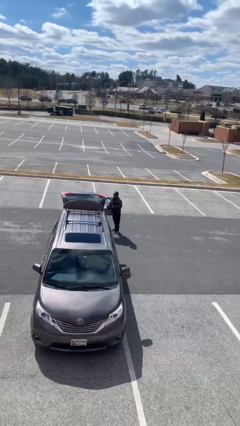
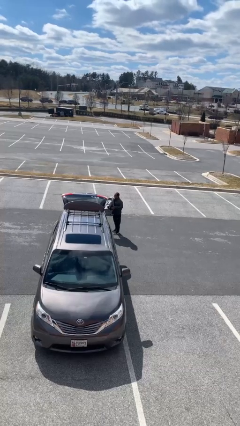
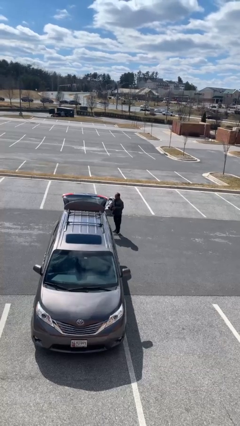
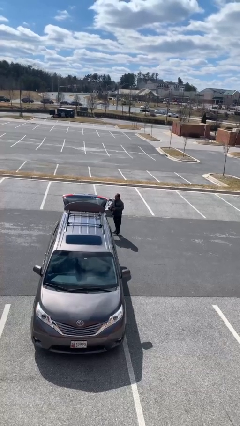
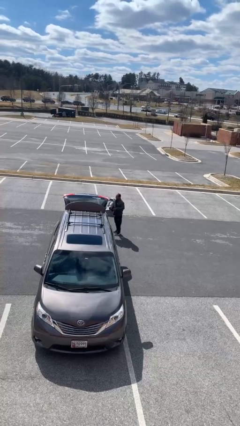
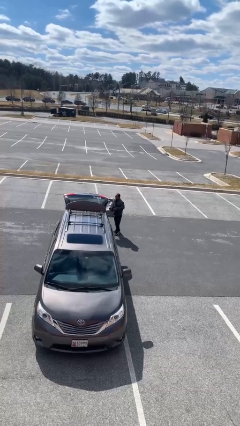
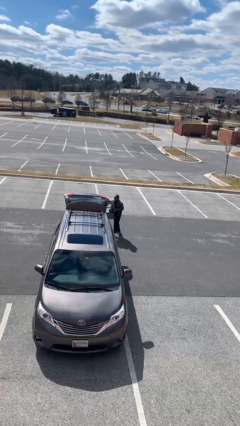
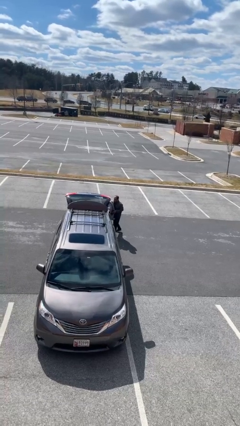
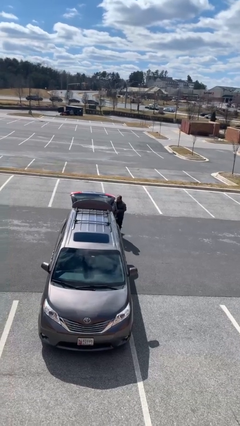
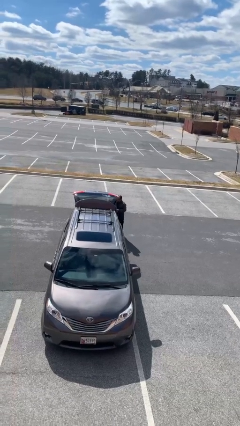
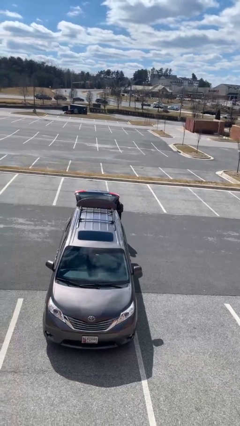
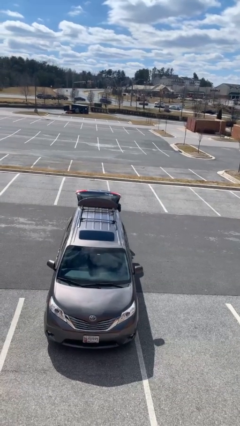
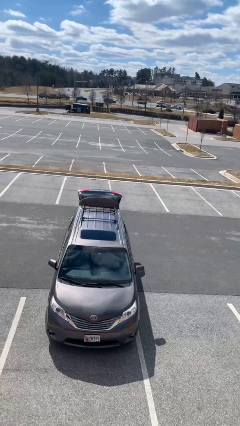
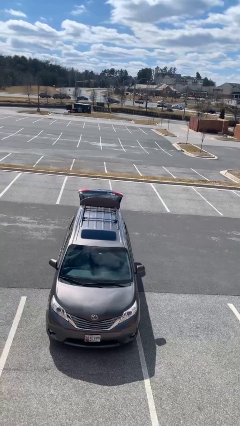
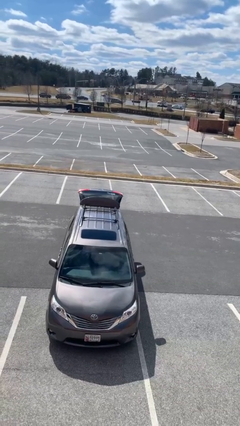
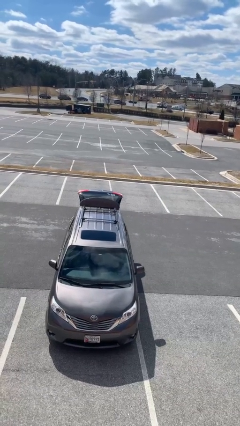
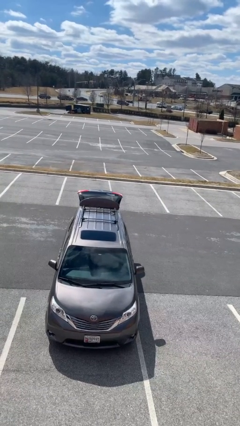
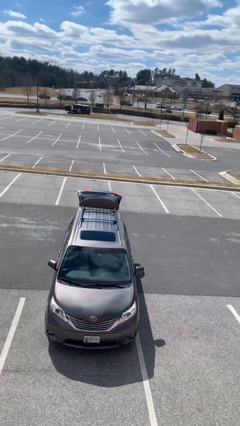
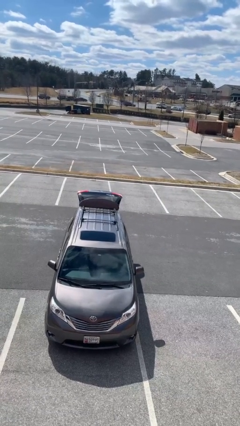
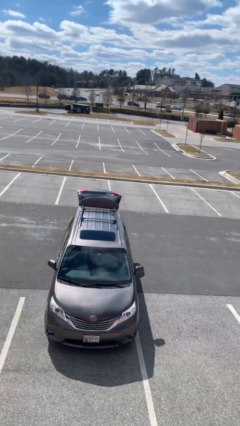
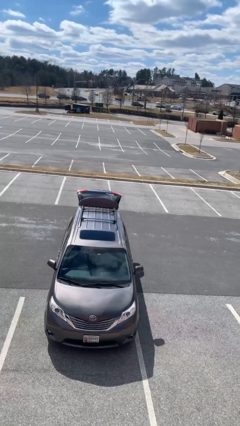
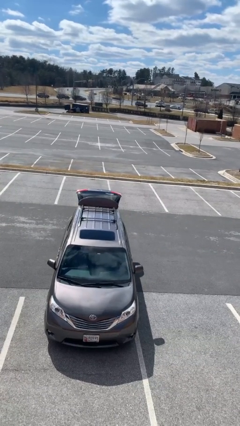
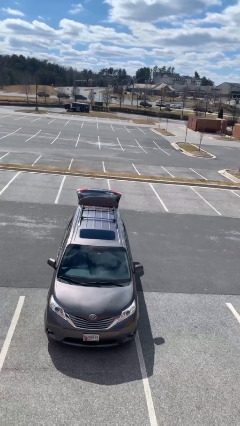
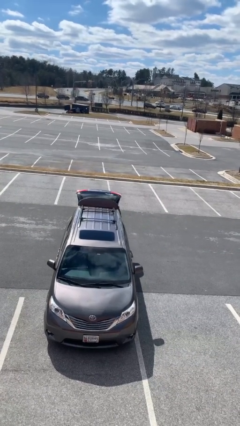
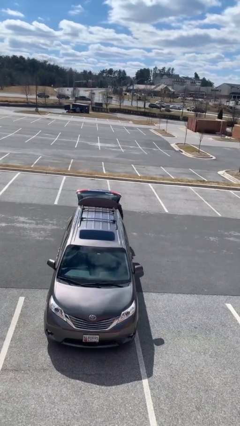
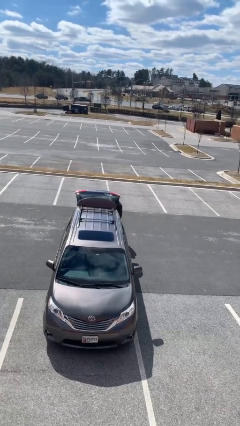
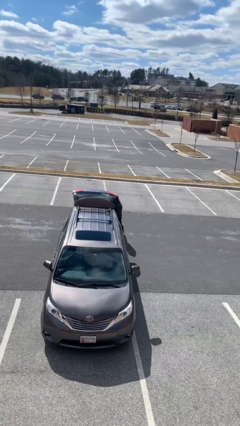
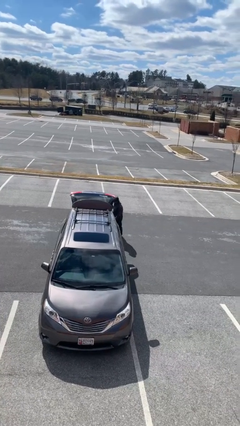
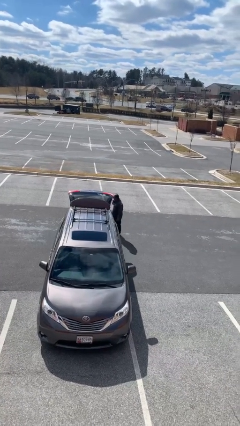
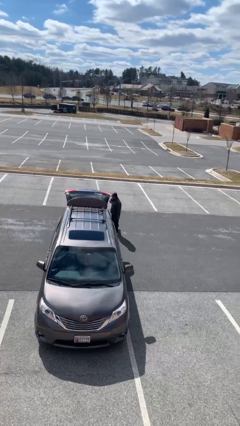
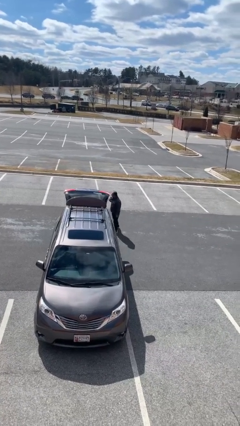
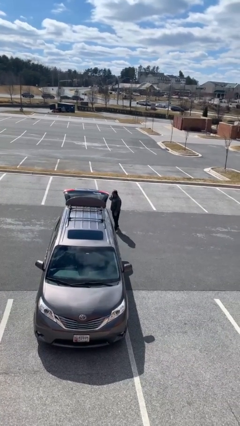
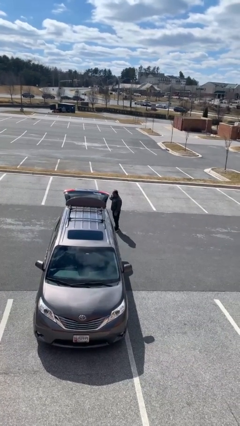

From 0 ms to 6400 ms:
person loads car

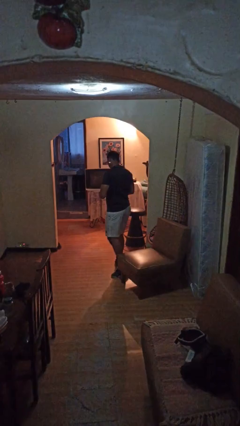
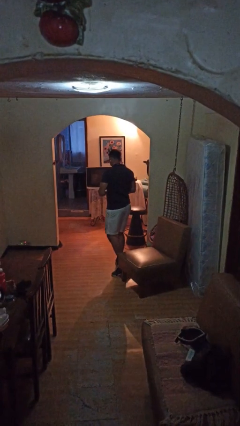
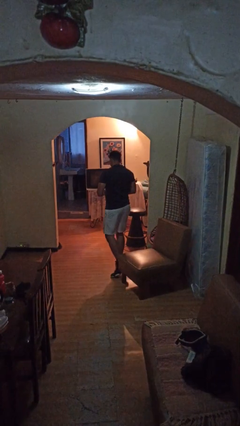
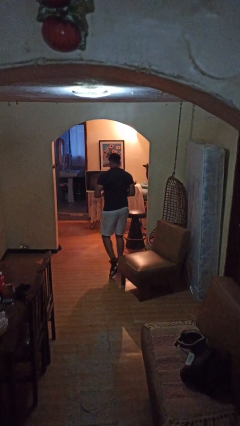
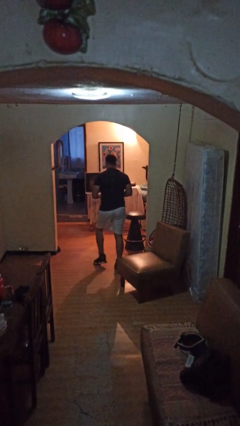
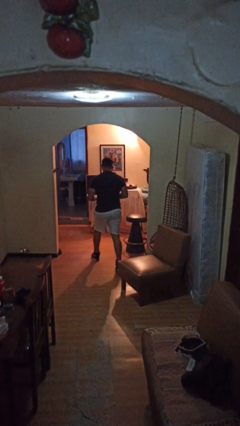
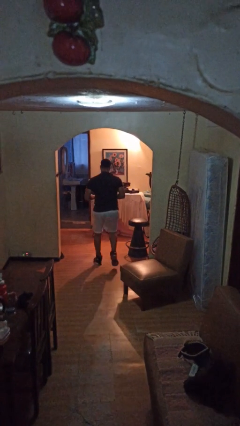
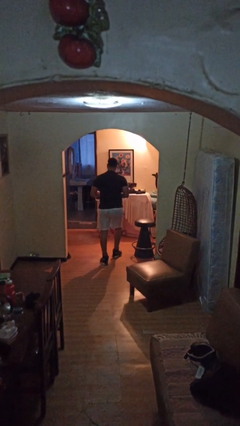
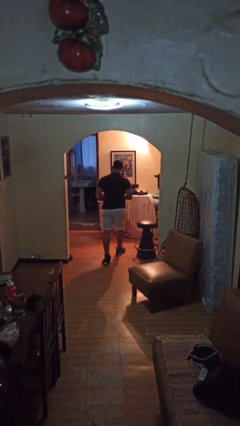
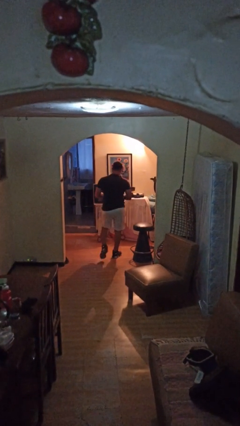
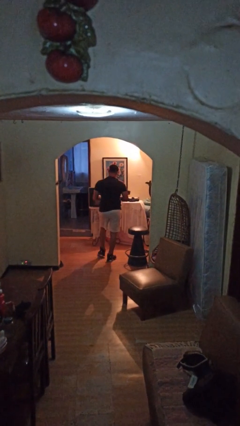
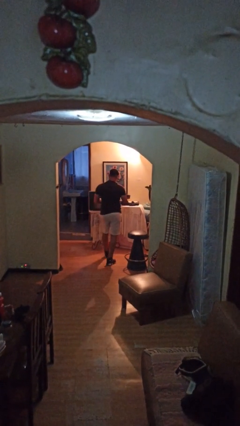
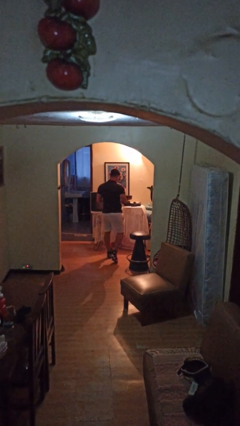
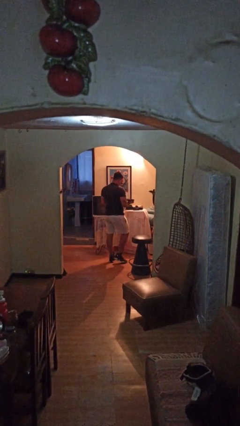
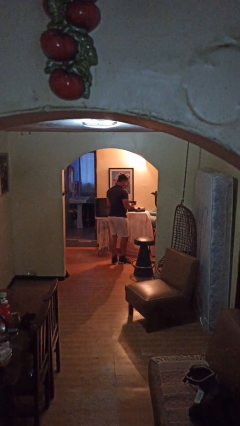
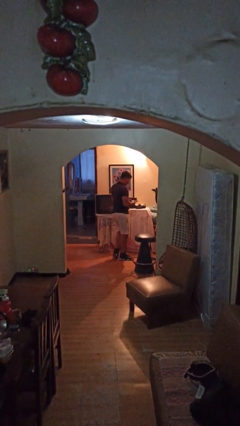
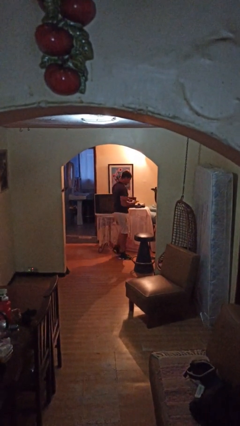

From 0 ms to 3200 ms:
person exits scene through structure

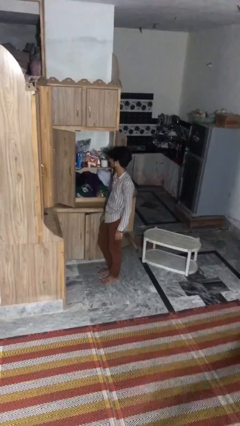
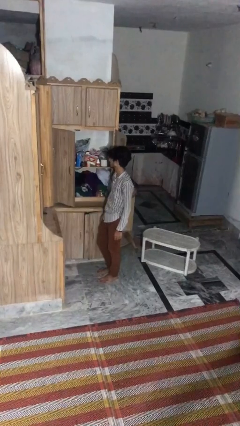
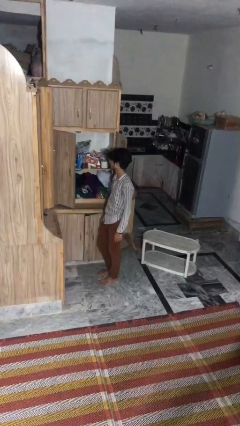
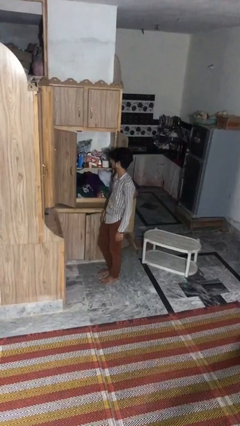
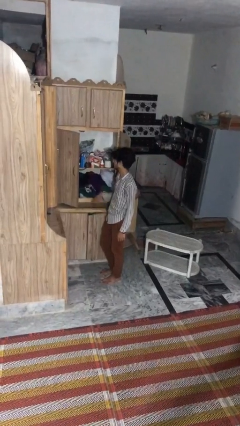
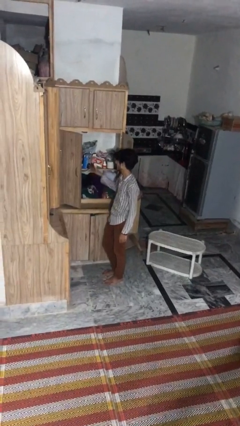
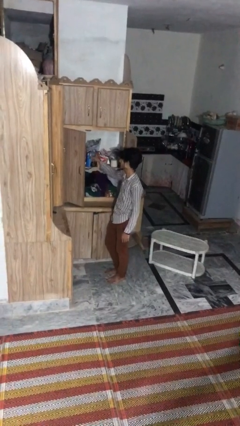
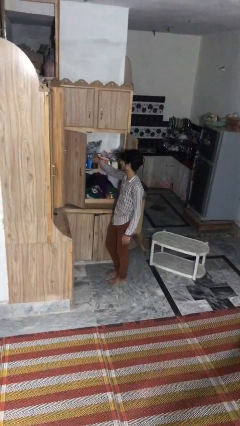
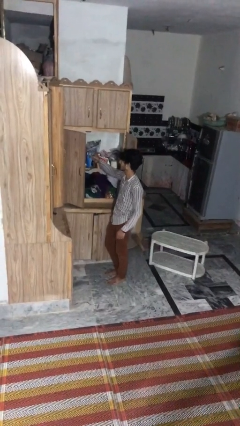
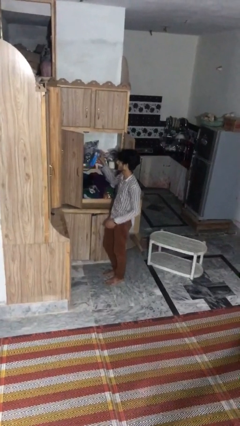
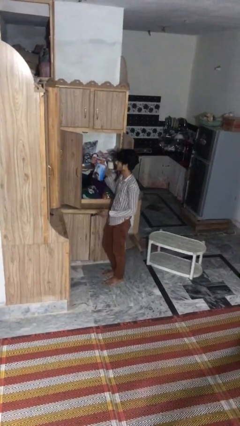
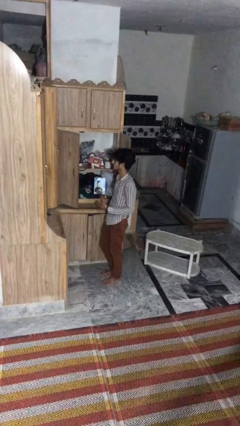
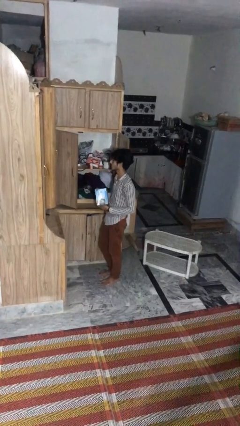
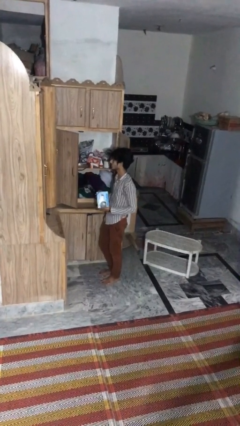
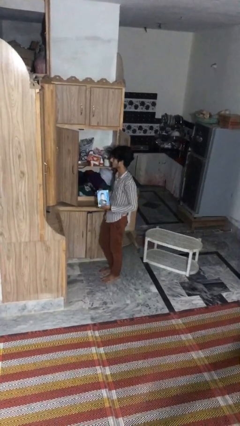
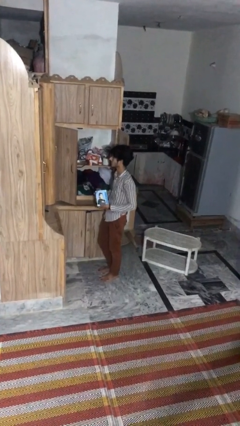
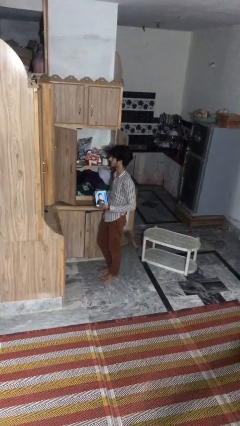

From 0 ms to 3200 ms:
person picks up object from cabinet

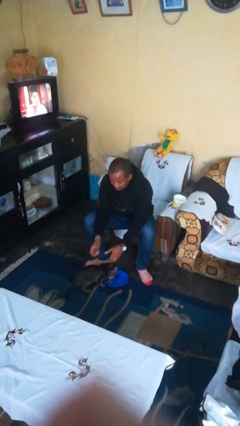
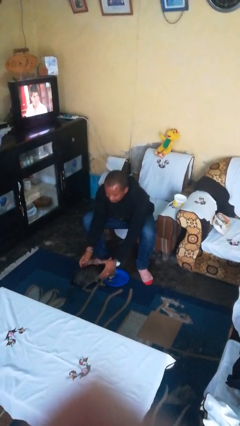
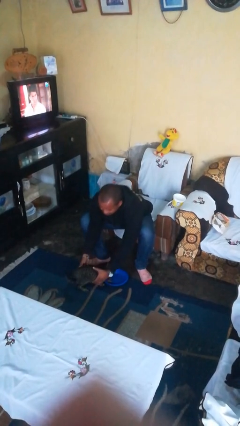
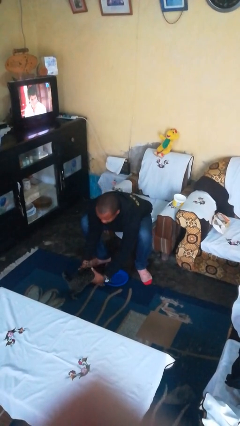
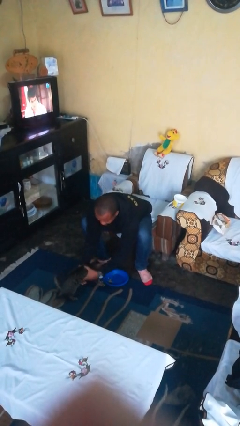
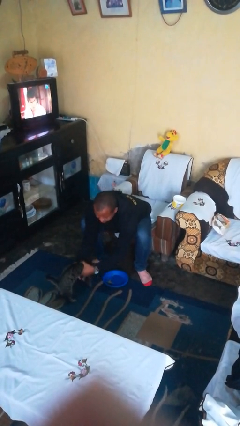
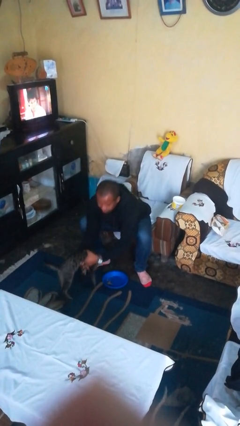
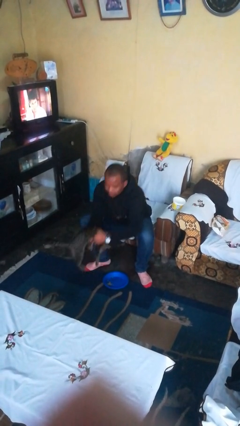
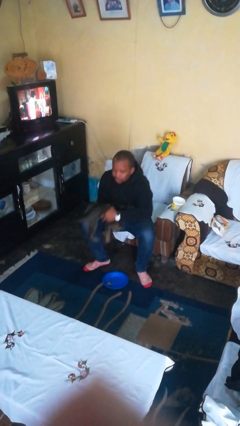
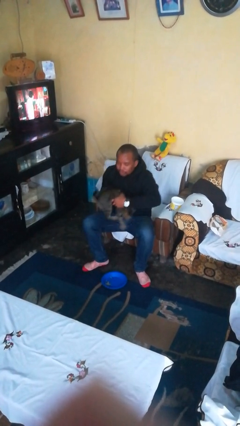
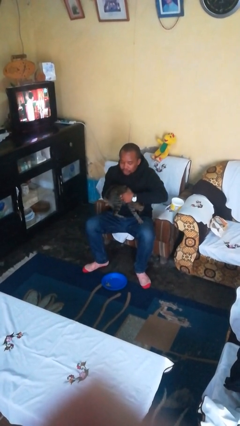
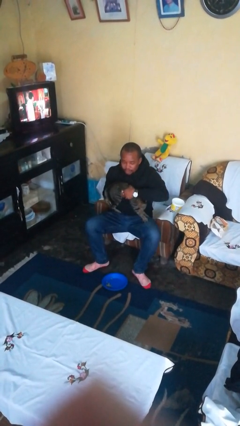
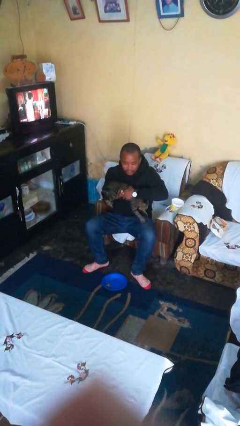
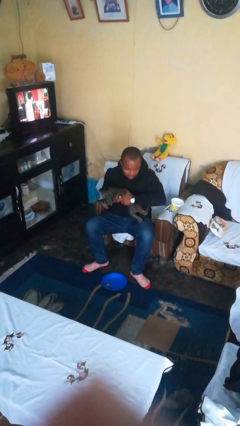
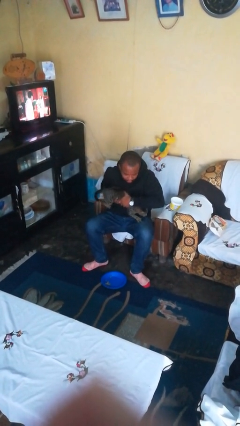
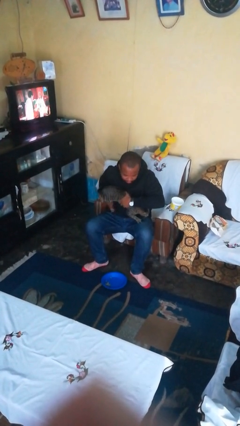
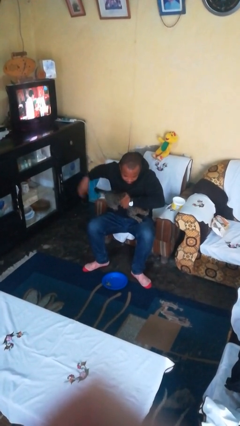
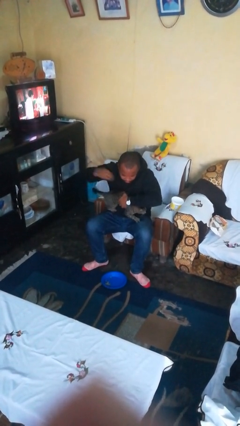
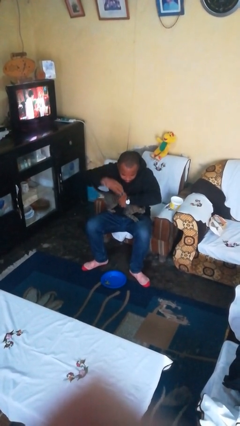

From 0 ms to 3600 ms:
person hugs cat

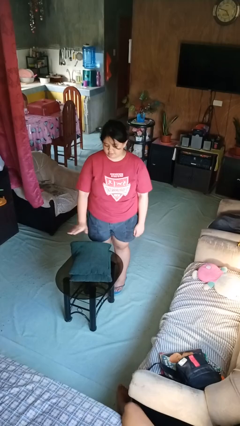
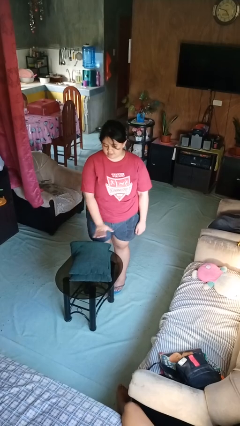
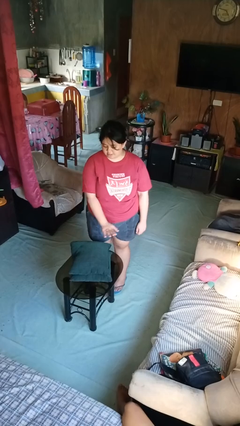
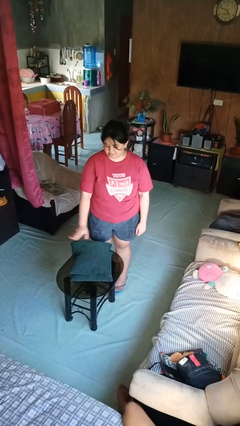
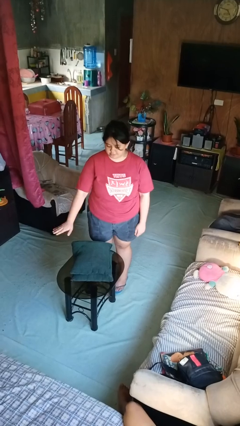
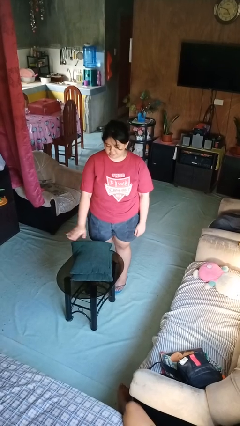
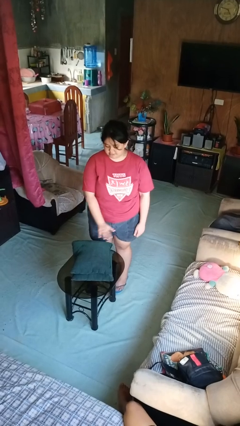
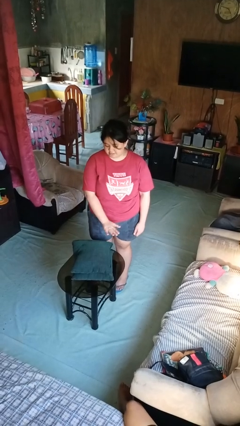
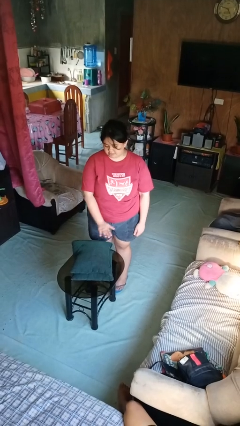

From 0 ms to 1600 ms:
person waves hand over object

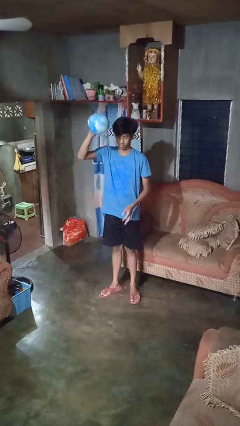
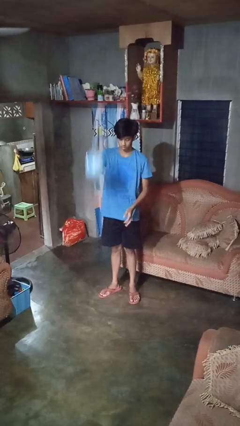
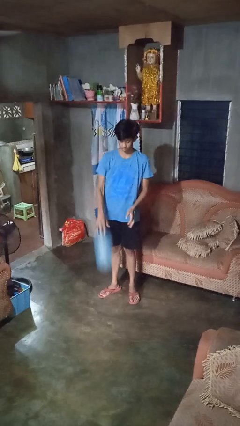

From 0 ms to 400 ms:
person bounces ball on floor
